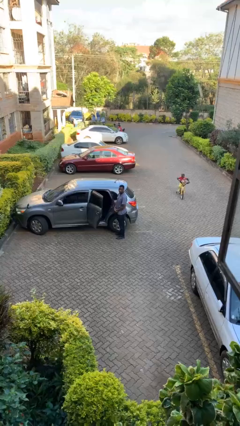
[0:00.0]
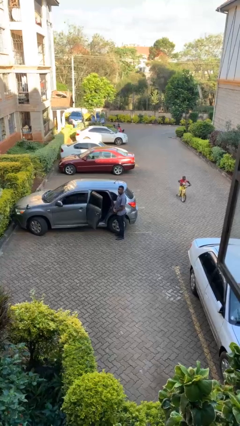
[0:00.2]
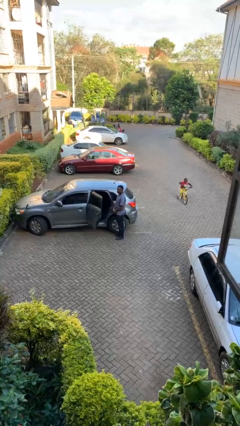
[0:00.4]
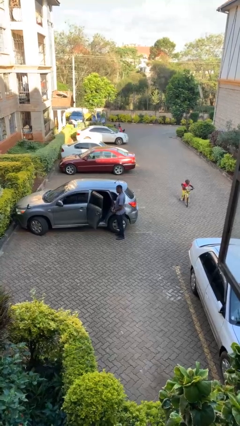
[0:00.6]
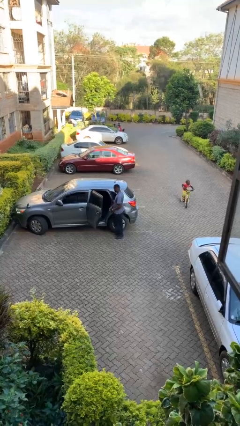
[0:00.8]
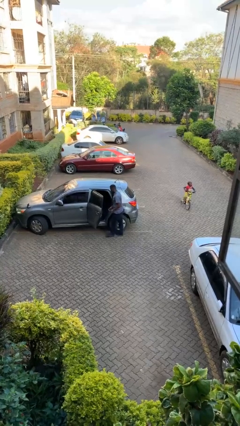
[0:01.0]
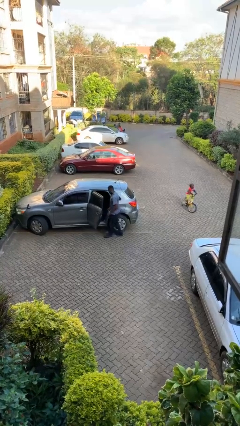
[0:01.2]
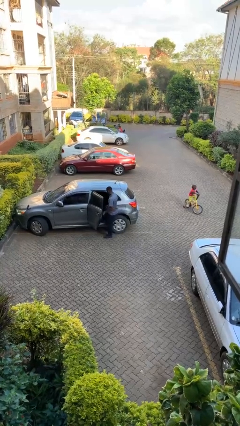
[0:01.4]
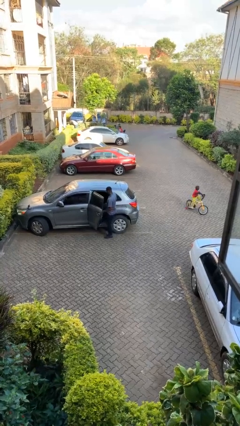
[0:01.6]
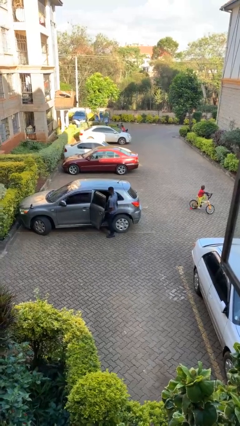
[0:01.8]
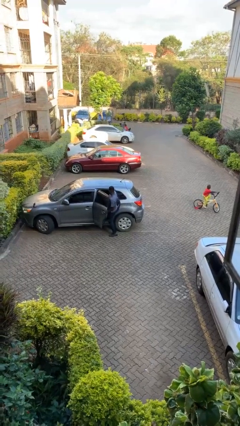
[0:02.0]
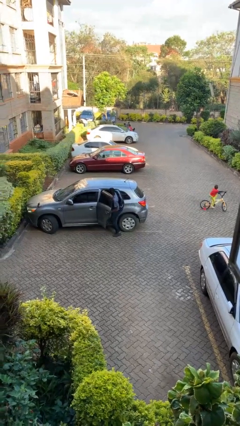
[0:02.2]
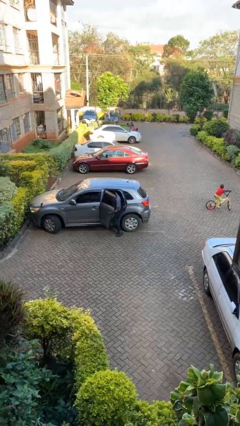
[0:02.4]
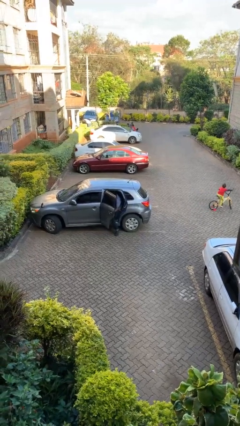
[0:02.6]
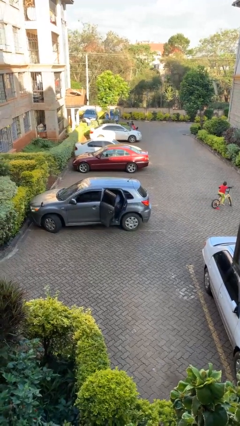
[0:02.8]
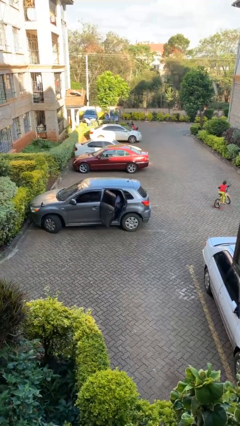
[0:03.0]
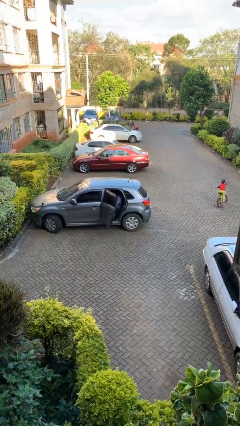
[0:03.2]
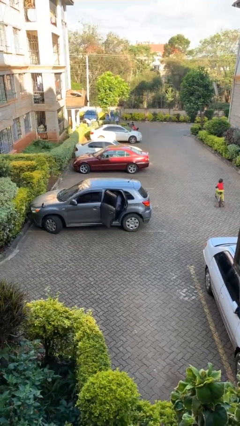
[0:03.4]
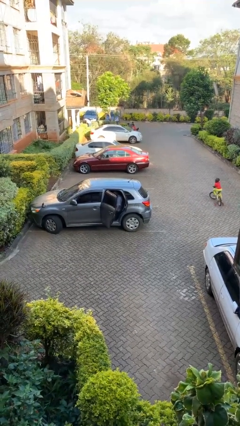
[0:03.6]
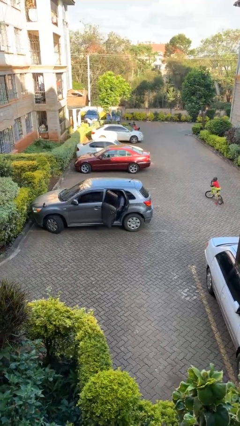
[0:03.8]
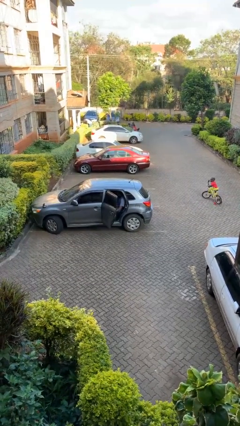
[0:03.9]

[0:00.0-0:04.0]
person enters car

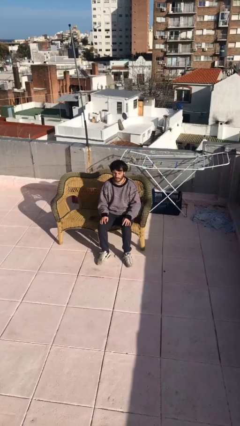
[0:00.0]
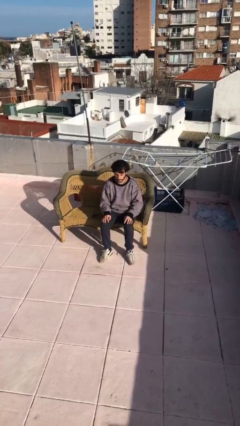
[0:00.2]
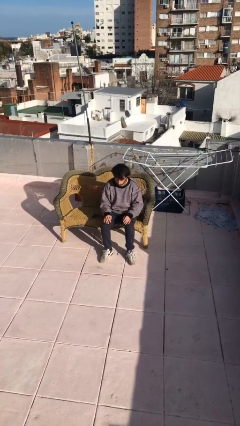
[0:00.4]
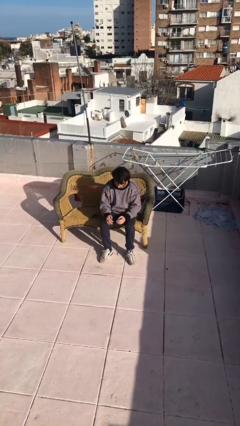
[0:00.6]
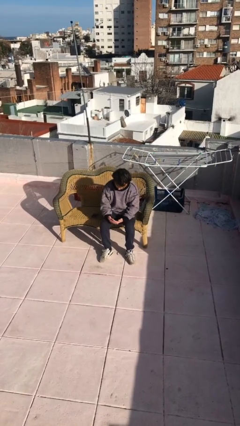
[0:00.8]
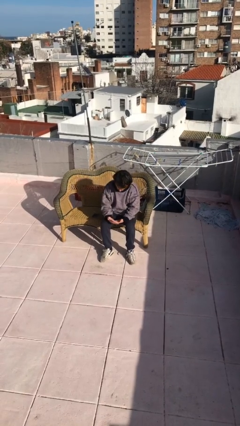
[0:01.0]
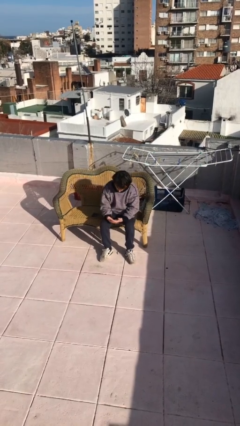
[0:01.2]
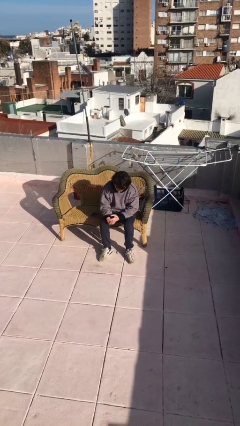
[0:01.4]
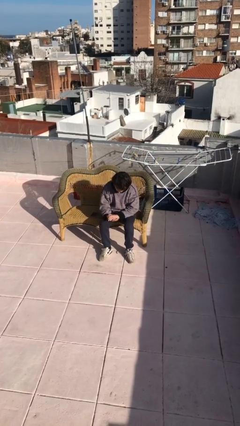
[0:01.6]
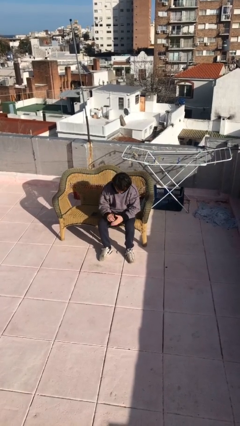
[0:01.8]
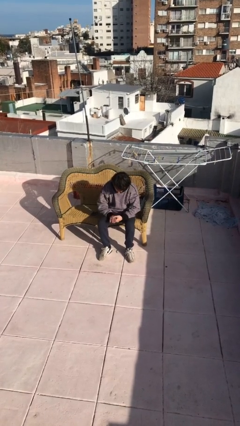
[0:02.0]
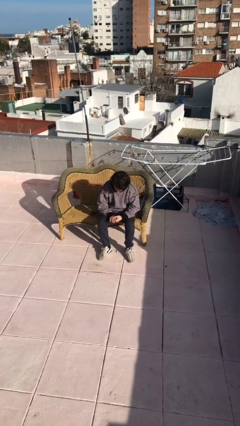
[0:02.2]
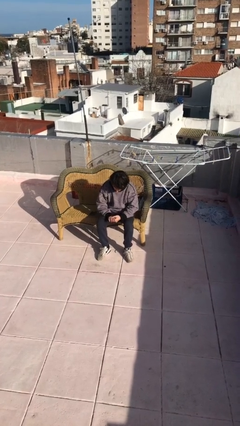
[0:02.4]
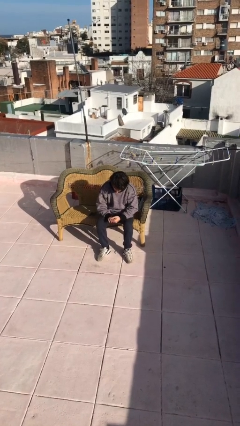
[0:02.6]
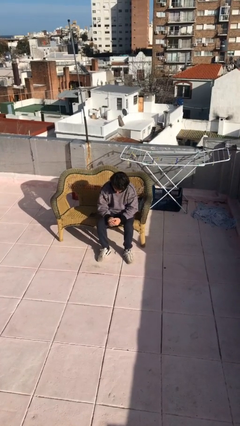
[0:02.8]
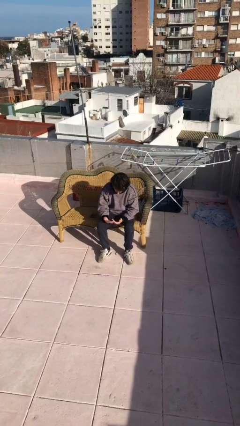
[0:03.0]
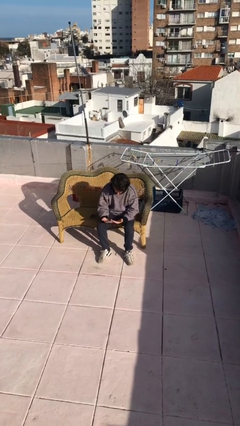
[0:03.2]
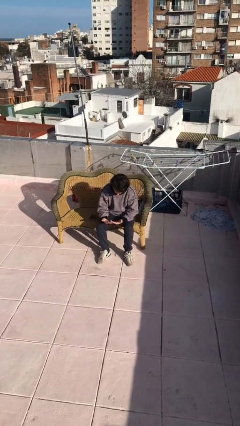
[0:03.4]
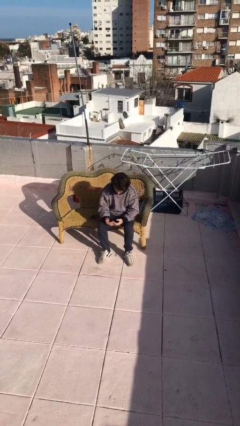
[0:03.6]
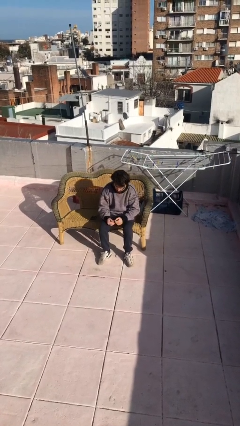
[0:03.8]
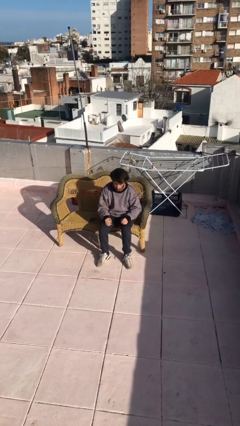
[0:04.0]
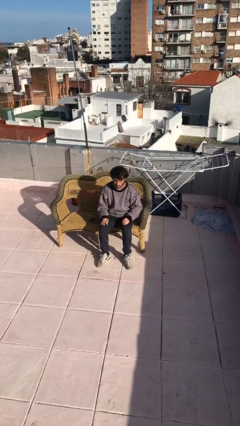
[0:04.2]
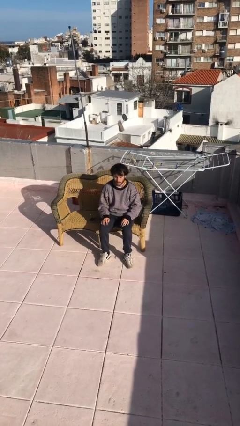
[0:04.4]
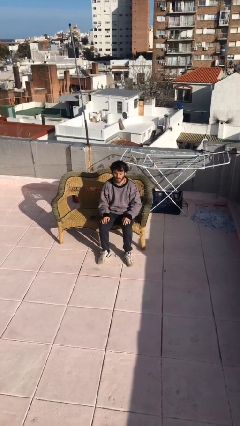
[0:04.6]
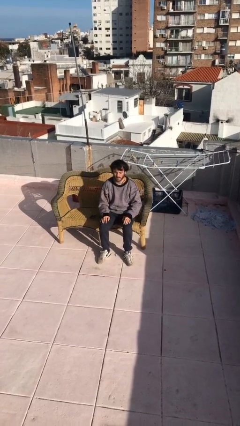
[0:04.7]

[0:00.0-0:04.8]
person looks at hands in lap

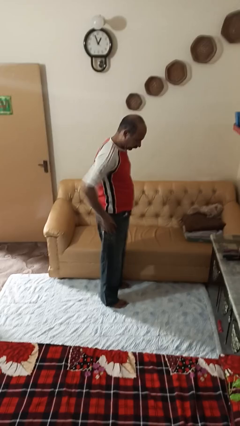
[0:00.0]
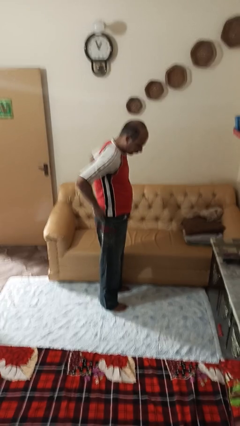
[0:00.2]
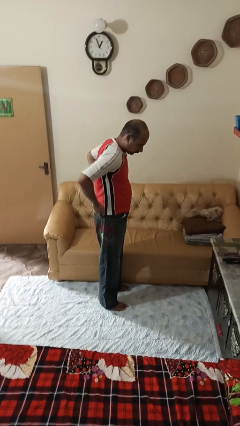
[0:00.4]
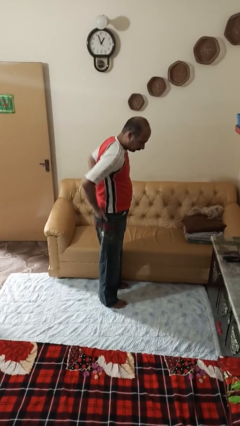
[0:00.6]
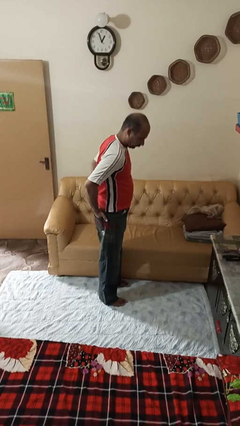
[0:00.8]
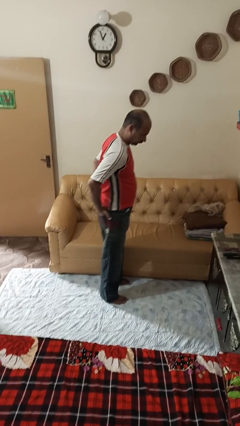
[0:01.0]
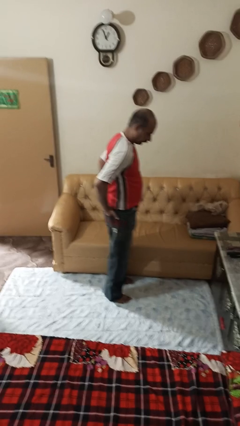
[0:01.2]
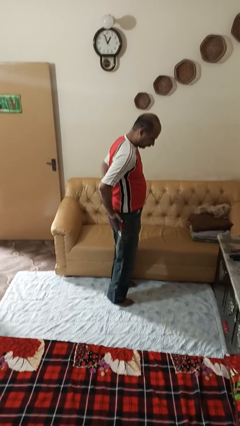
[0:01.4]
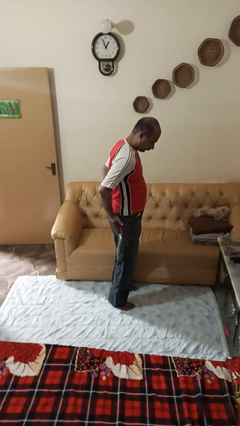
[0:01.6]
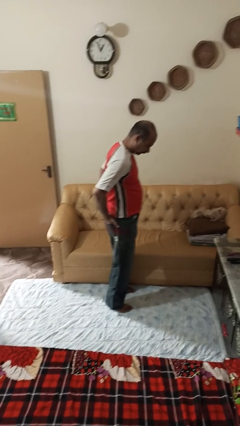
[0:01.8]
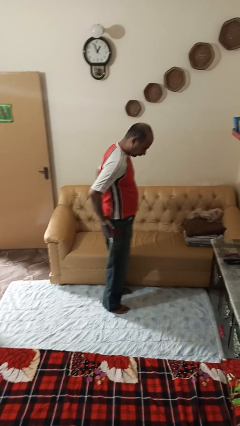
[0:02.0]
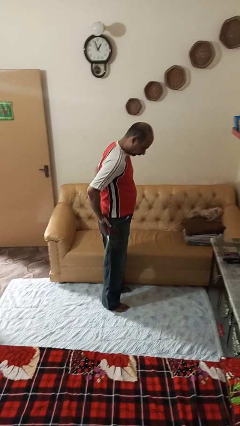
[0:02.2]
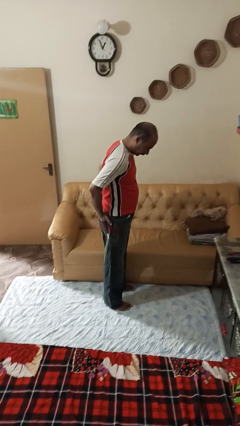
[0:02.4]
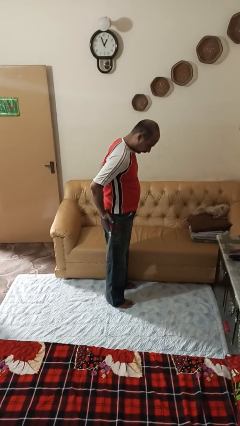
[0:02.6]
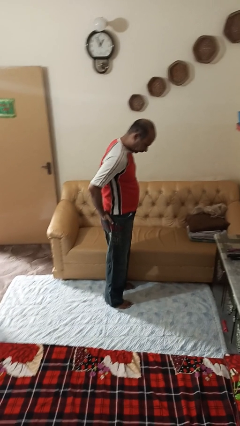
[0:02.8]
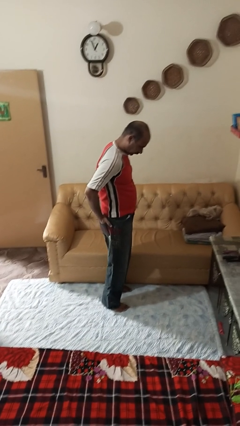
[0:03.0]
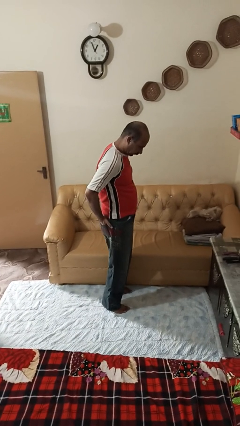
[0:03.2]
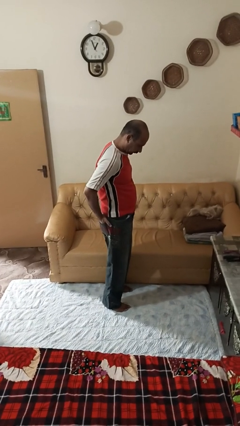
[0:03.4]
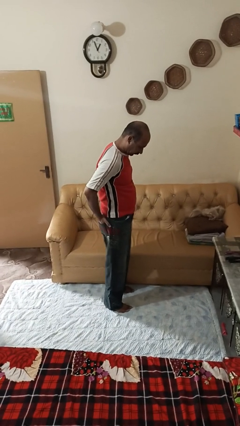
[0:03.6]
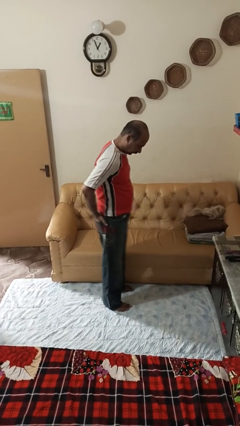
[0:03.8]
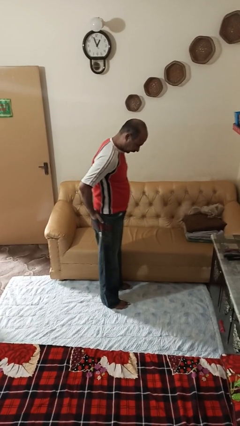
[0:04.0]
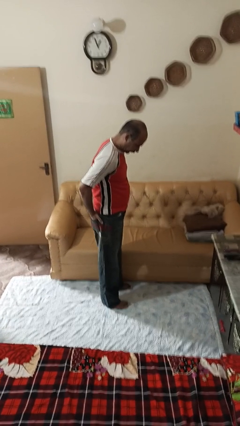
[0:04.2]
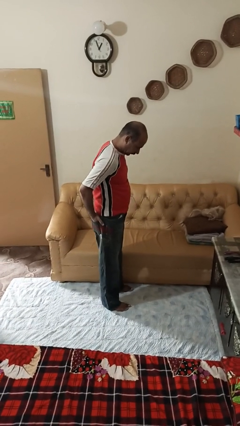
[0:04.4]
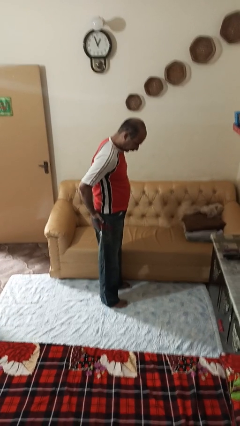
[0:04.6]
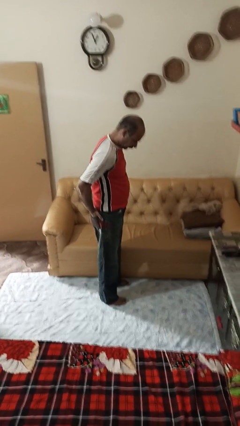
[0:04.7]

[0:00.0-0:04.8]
person puts hands in back pockets

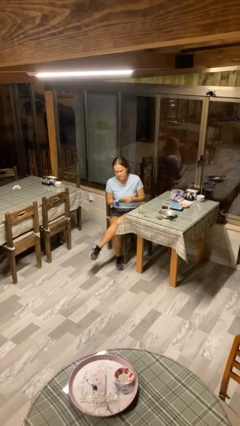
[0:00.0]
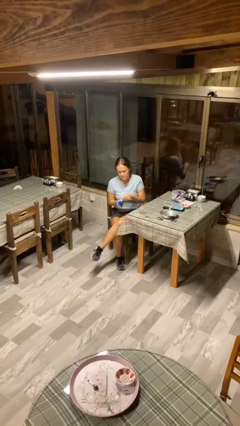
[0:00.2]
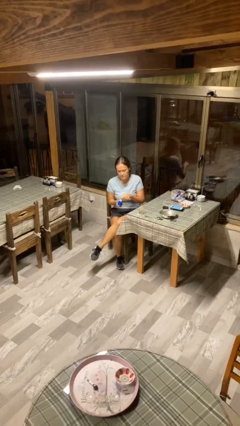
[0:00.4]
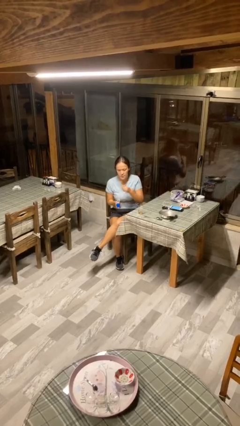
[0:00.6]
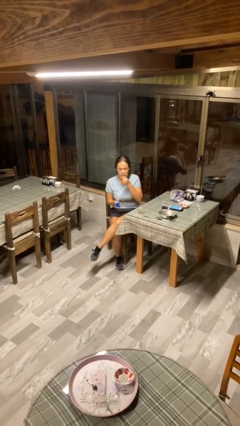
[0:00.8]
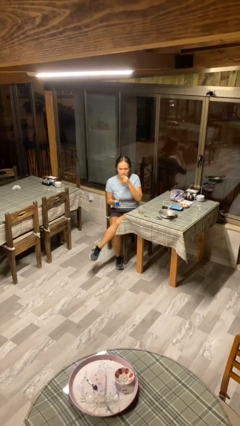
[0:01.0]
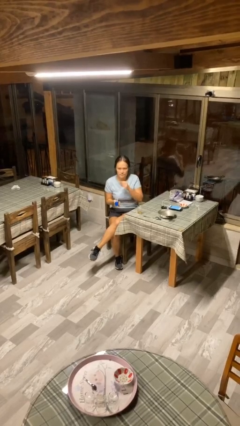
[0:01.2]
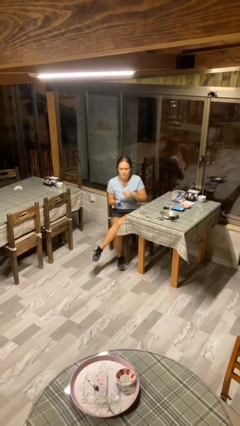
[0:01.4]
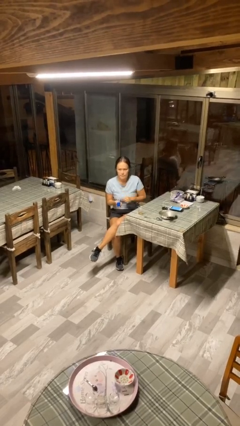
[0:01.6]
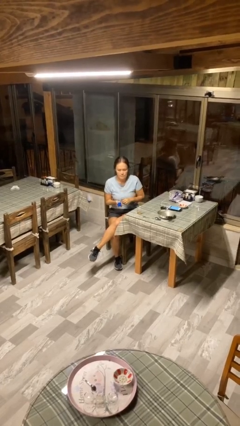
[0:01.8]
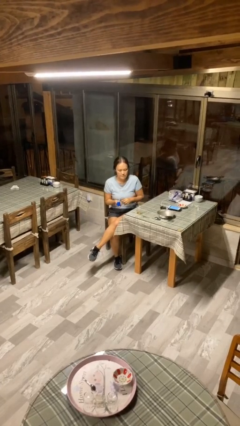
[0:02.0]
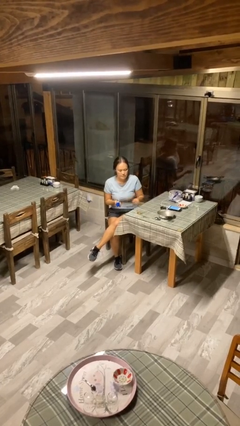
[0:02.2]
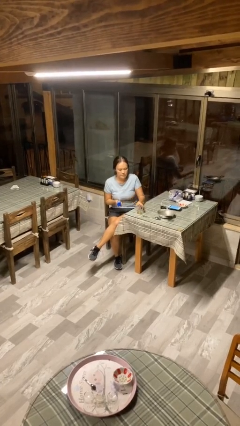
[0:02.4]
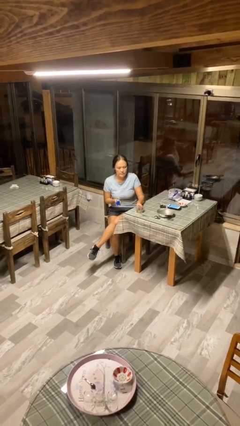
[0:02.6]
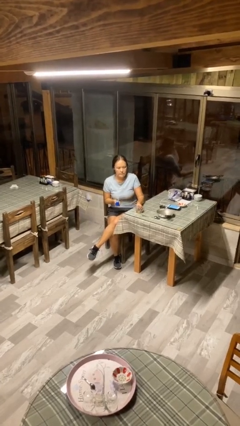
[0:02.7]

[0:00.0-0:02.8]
person takes medicine pills

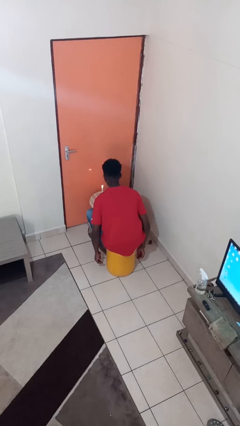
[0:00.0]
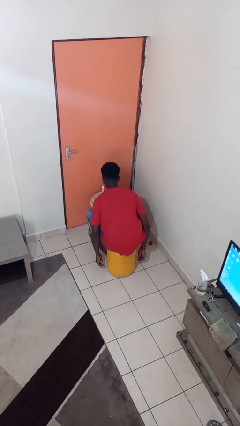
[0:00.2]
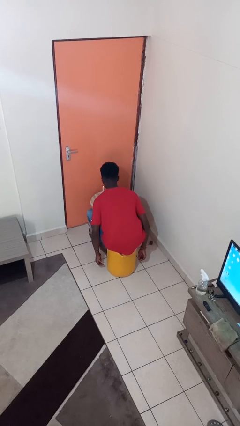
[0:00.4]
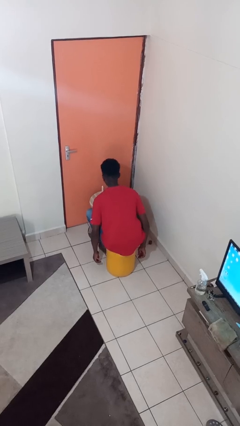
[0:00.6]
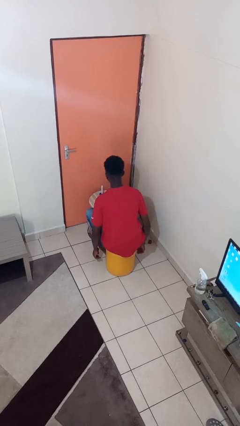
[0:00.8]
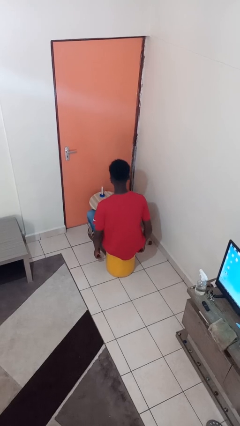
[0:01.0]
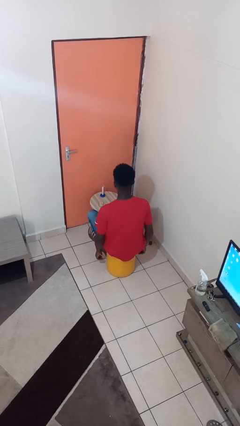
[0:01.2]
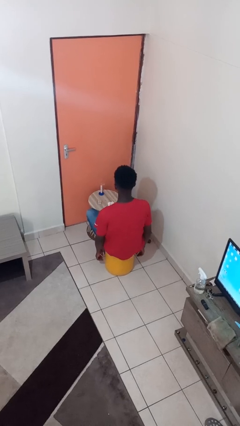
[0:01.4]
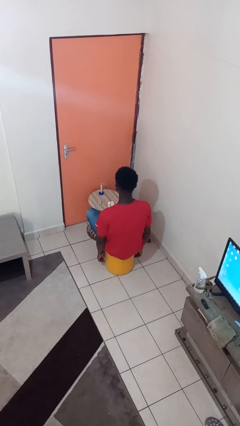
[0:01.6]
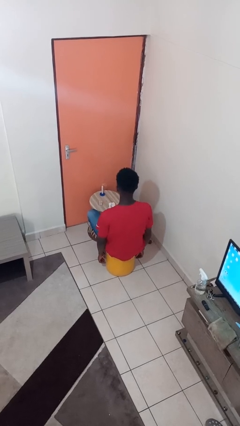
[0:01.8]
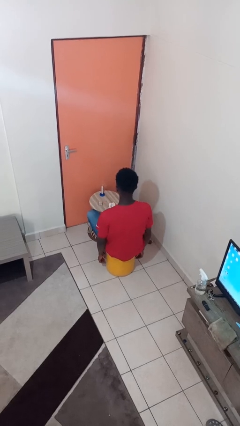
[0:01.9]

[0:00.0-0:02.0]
person extinguishes candle
